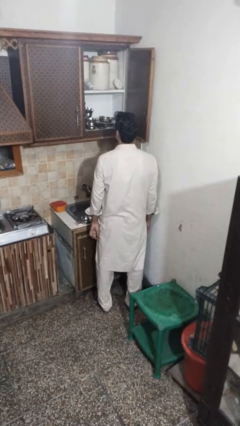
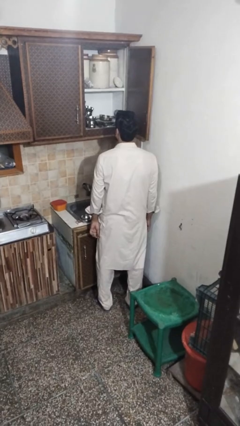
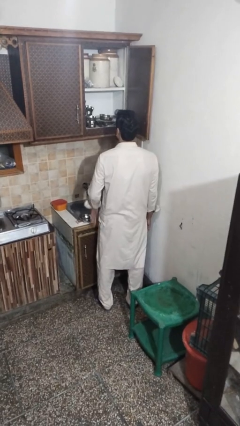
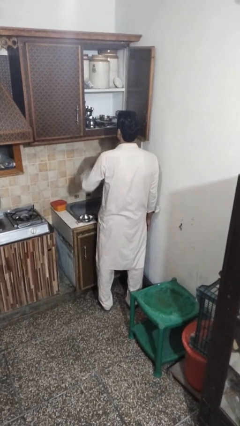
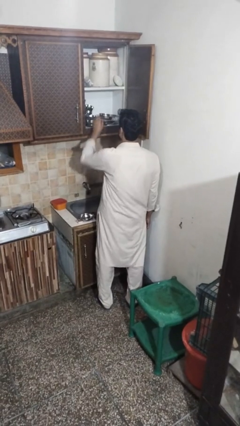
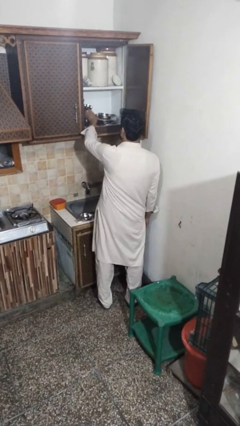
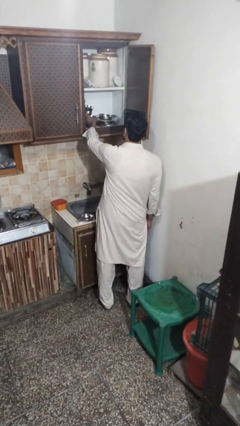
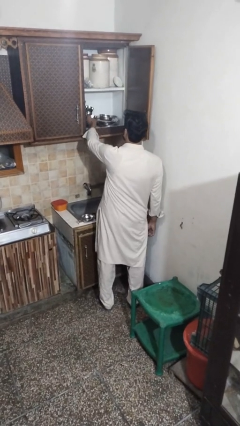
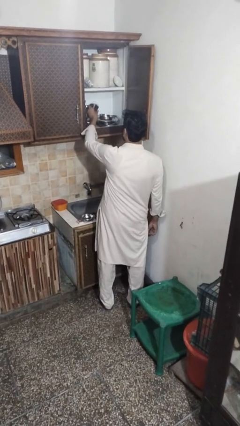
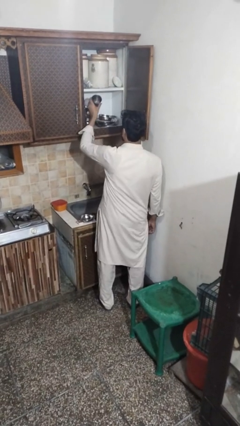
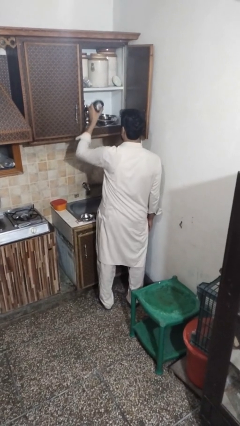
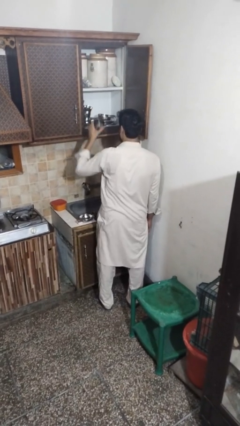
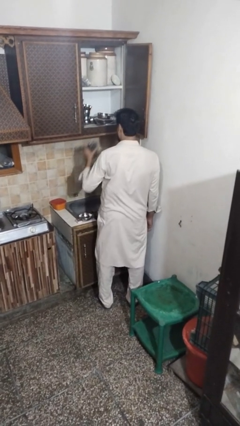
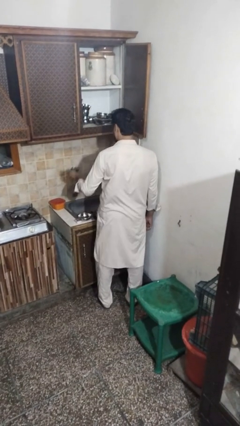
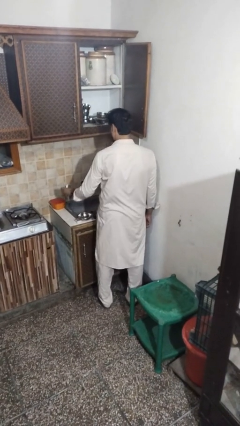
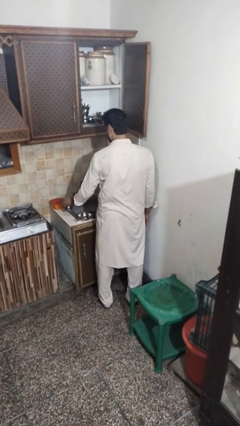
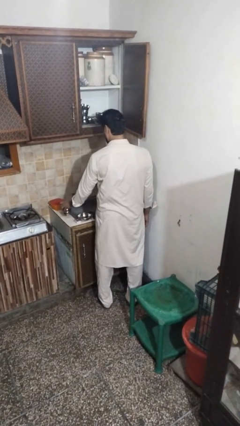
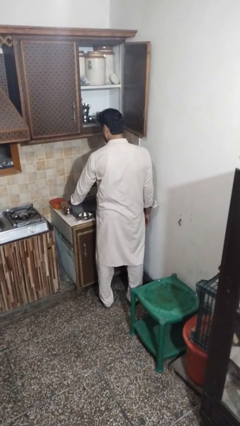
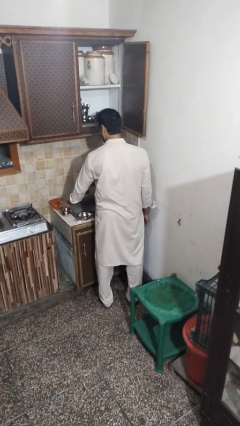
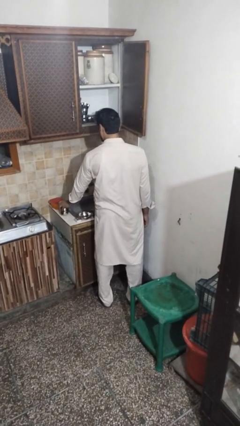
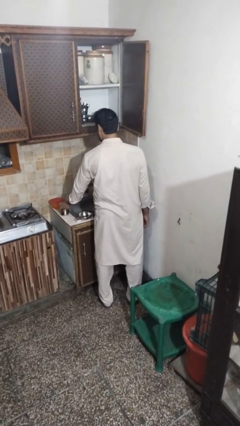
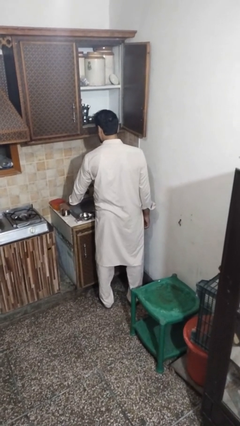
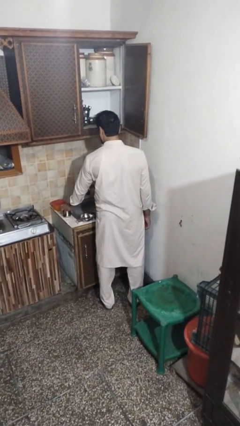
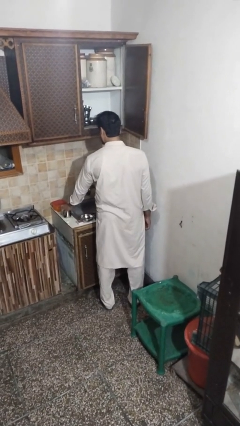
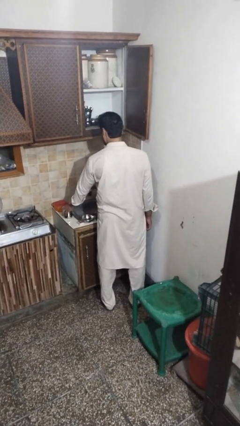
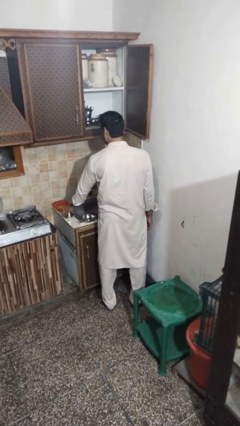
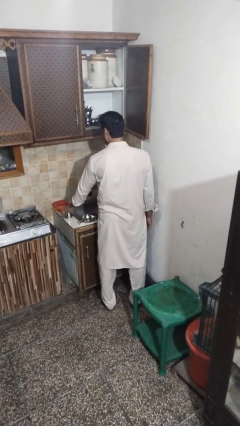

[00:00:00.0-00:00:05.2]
person takes object from cabinet

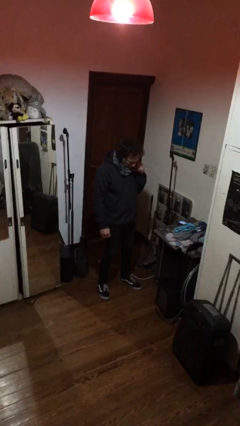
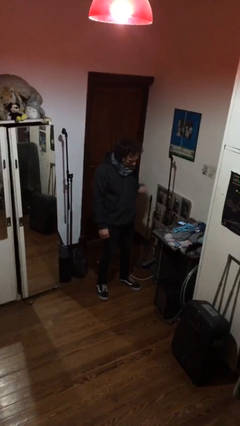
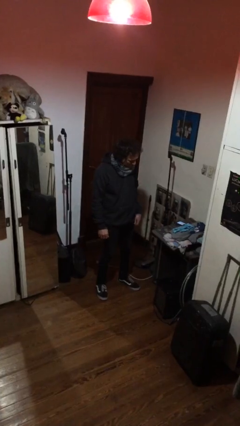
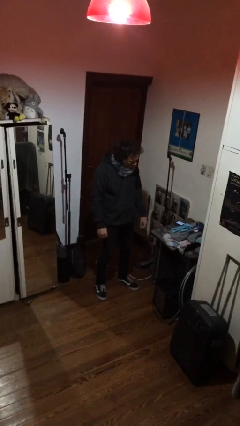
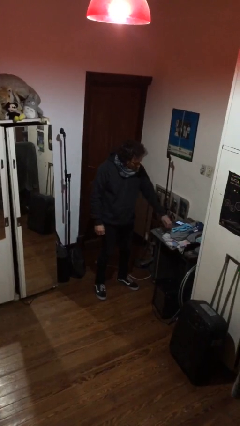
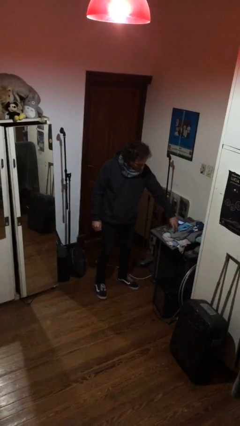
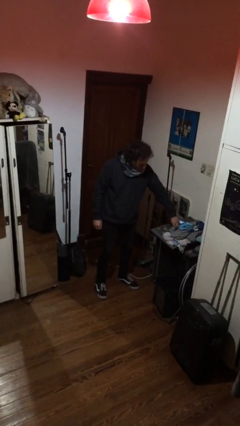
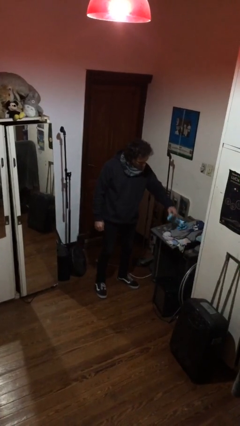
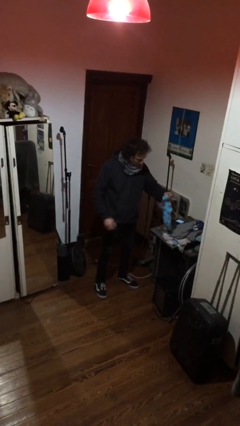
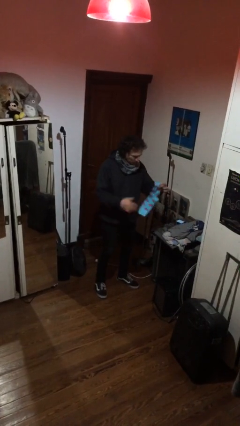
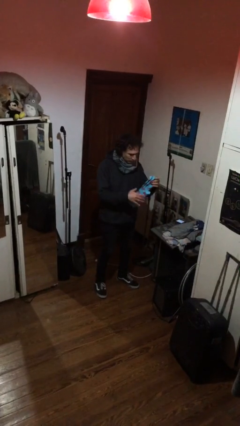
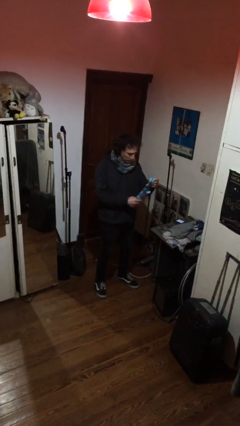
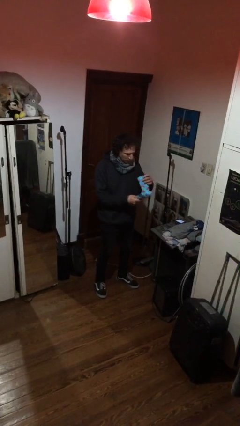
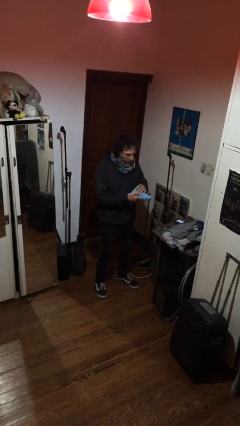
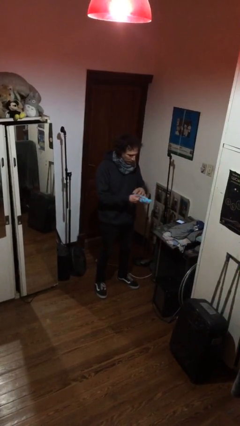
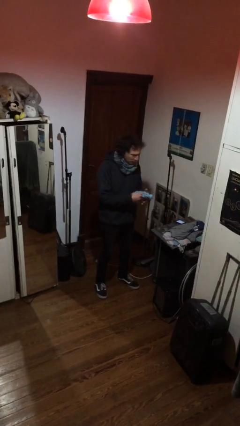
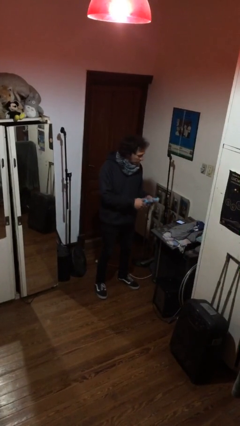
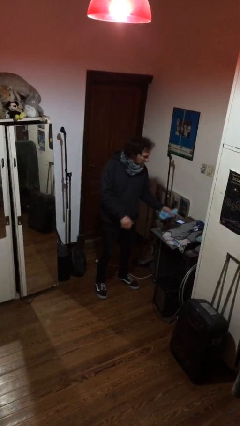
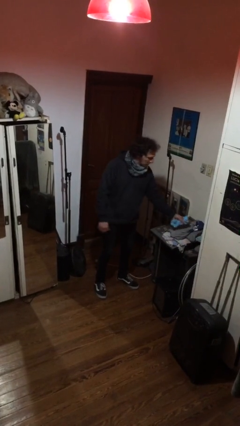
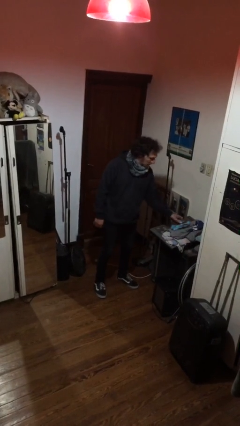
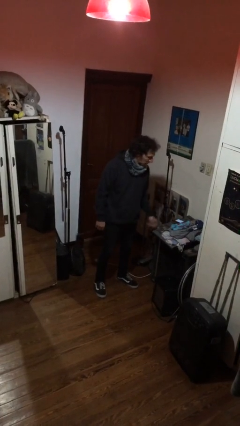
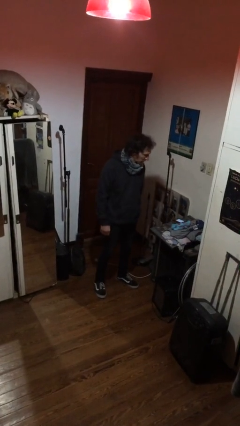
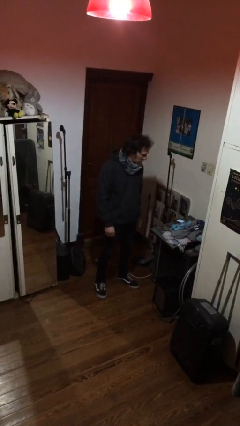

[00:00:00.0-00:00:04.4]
person folds socks

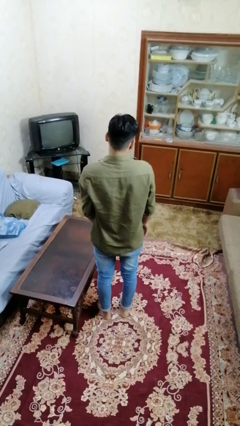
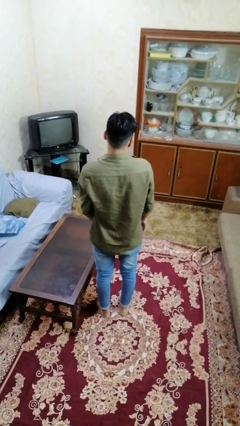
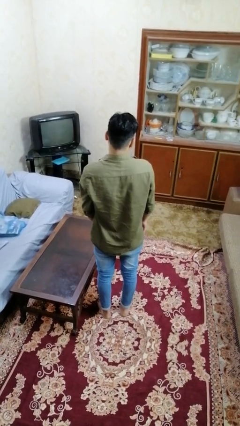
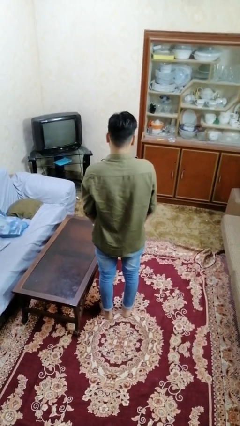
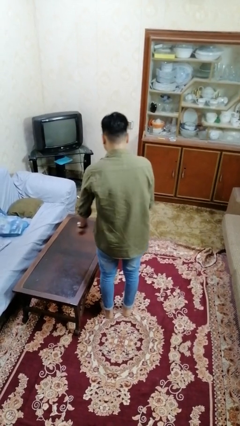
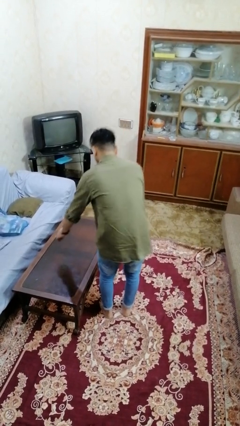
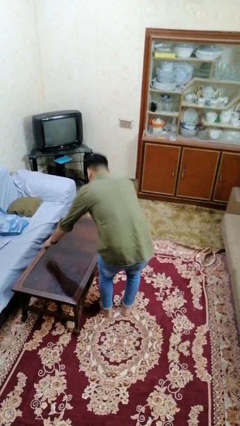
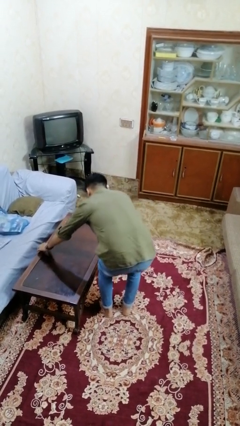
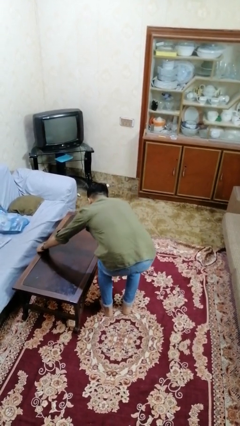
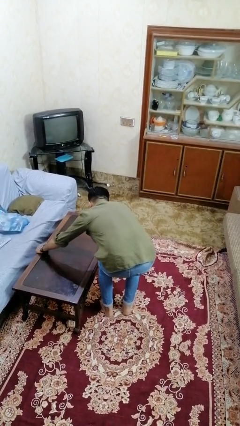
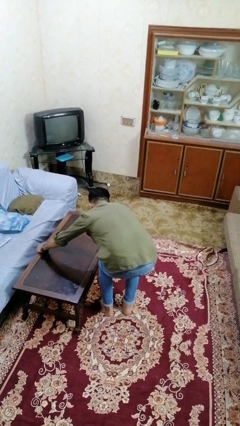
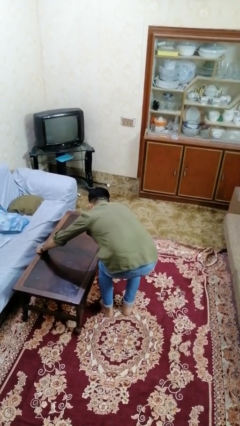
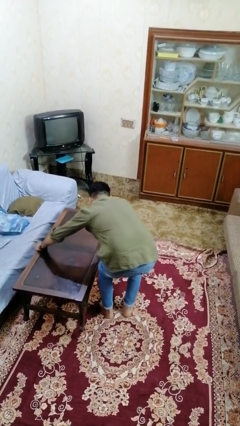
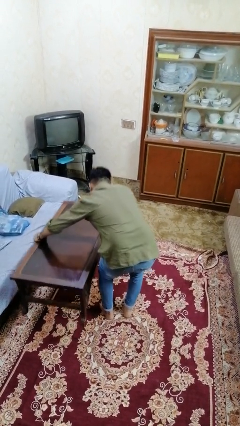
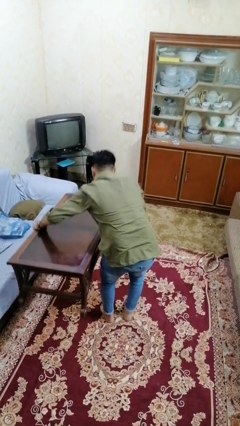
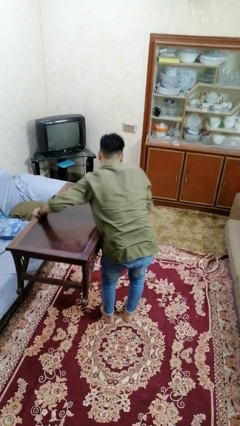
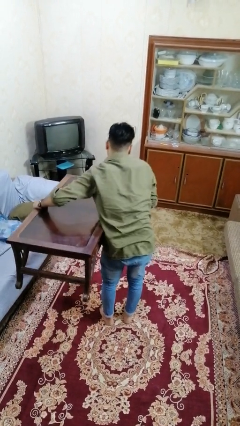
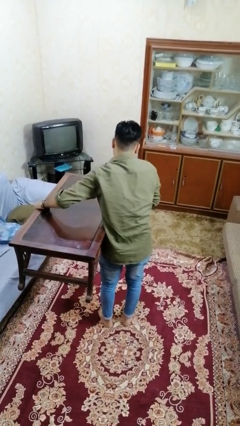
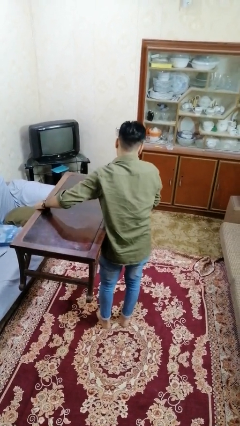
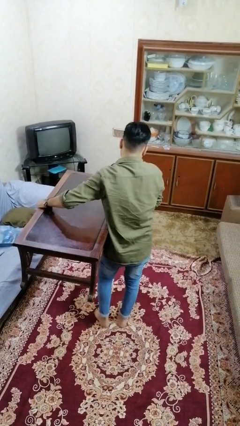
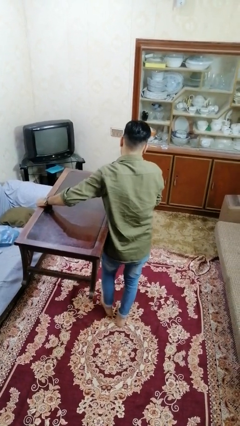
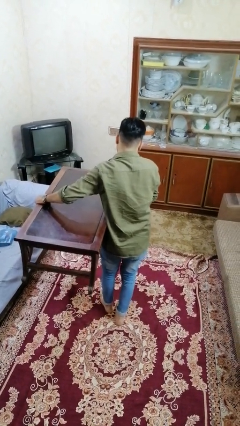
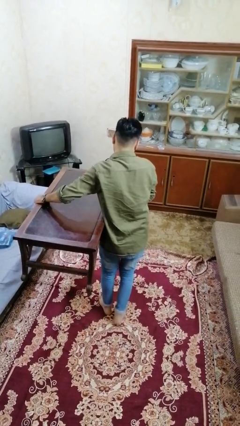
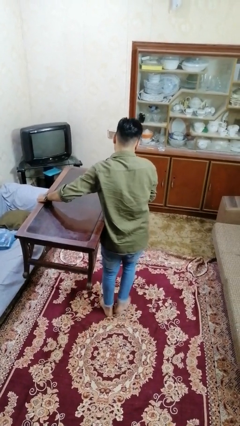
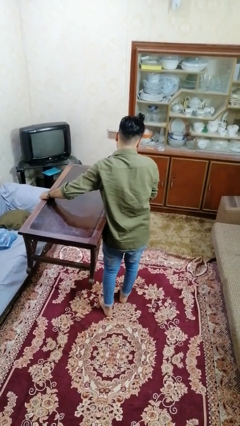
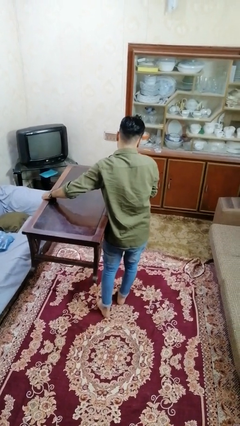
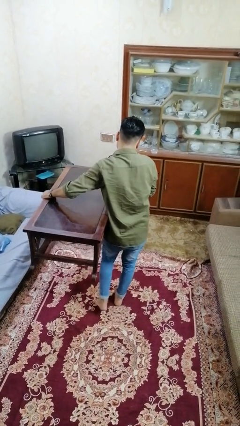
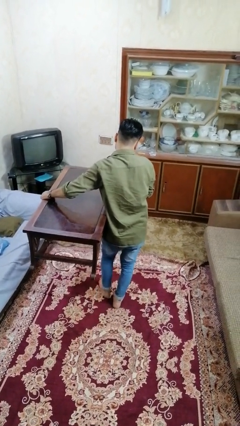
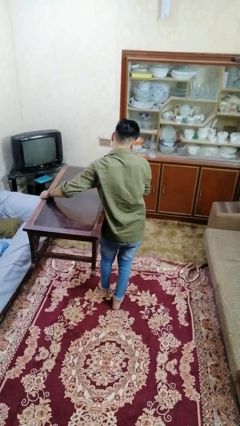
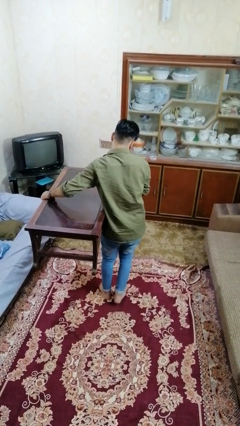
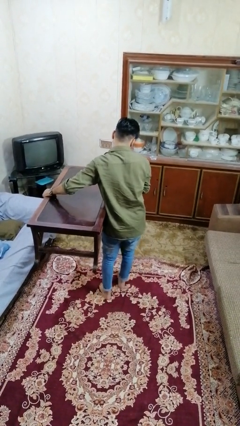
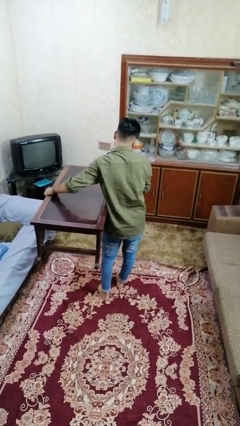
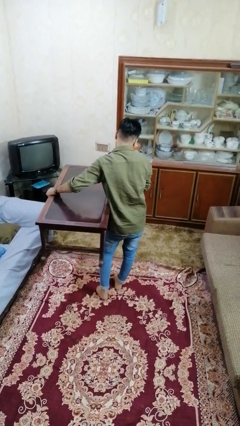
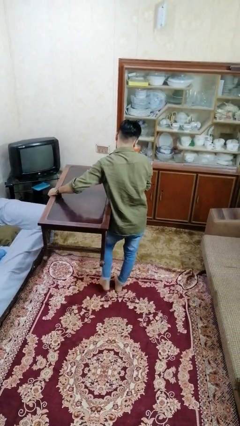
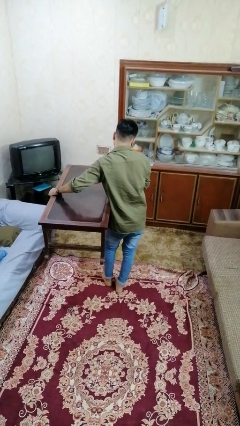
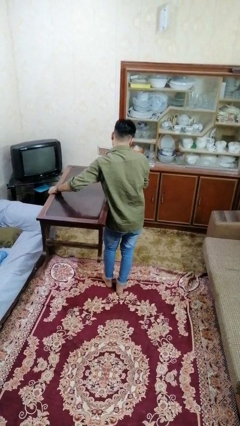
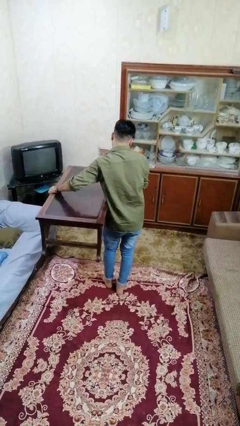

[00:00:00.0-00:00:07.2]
person carries furniture

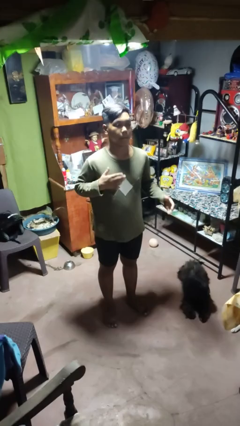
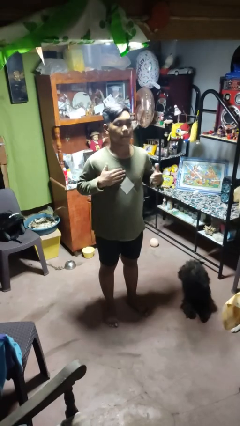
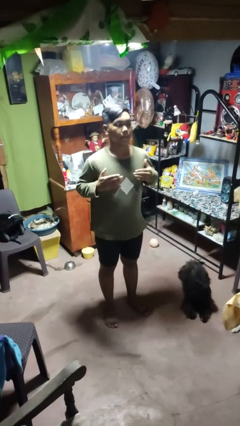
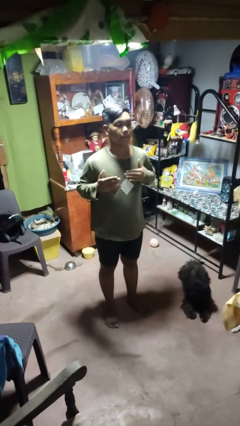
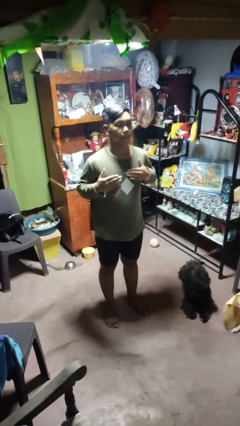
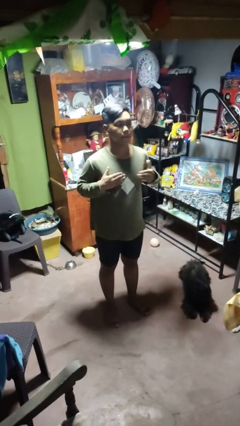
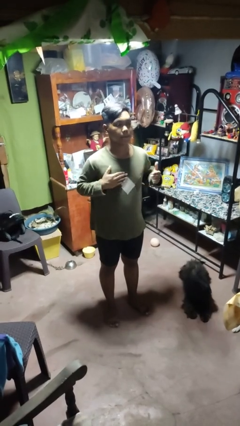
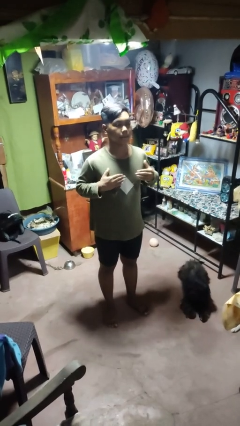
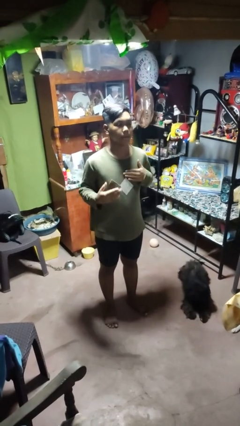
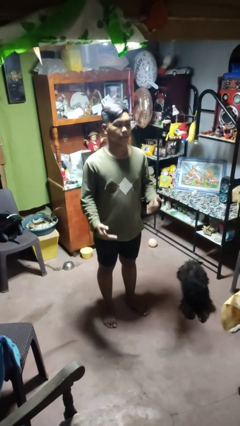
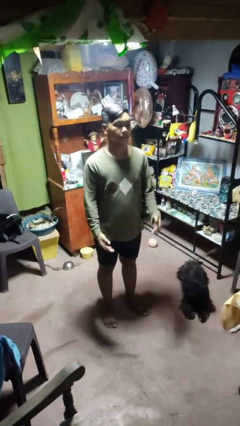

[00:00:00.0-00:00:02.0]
person drums on chest
